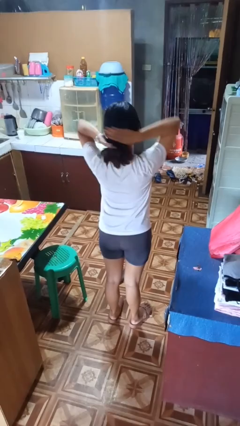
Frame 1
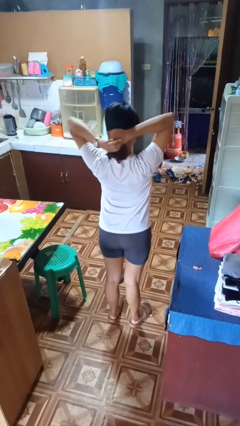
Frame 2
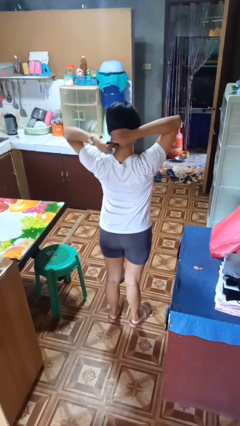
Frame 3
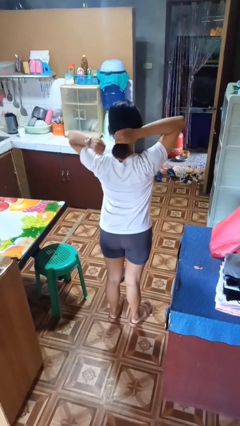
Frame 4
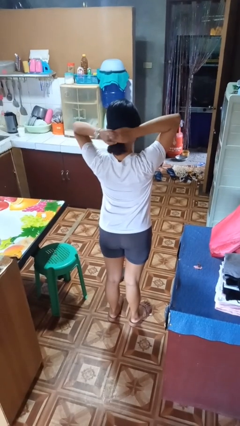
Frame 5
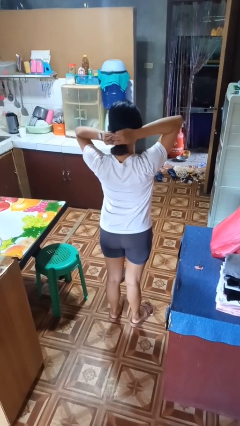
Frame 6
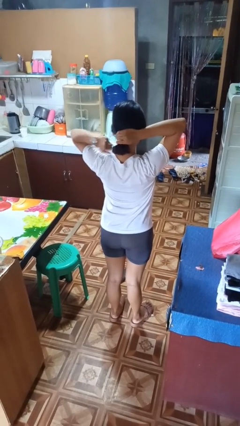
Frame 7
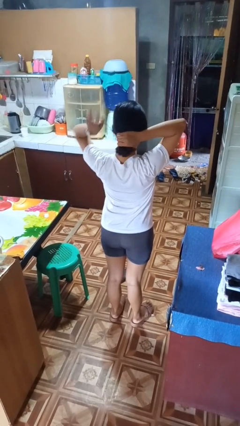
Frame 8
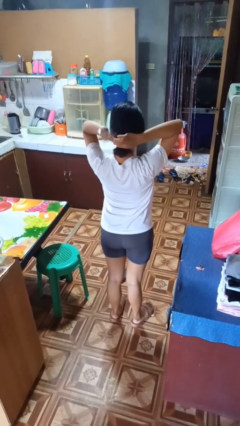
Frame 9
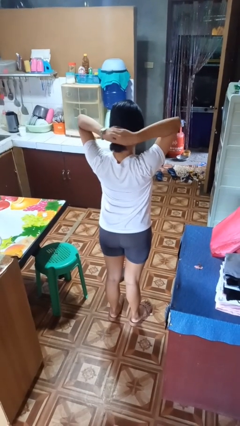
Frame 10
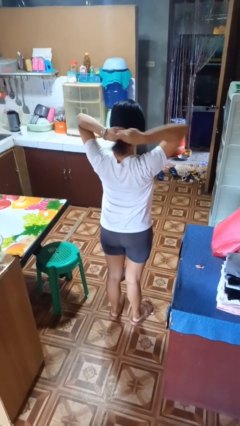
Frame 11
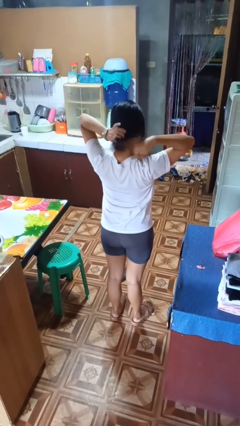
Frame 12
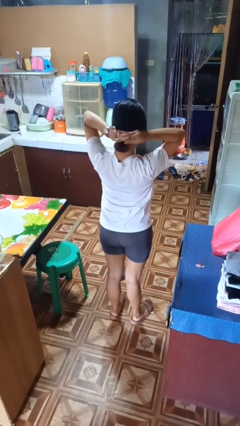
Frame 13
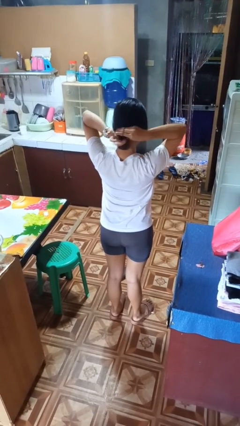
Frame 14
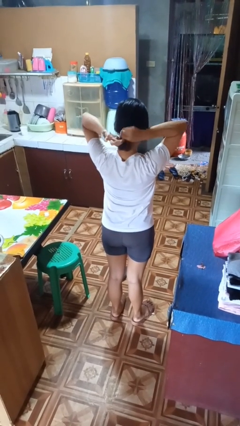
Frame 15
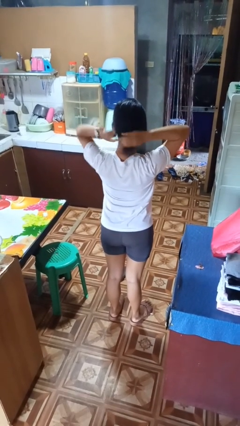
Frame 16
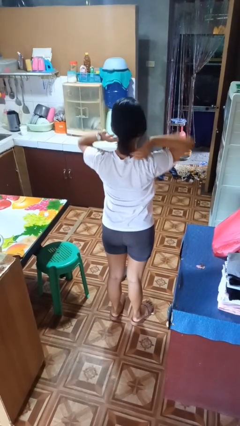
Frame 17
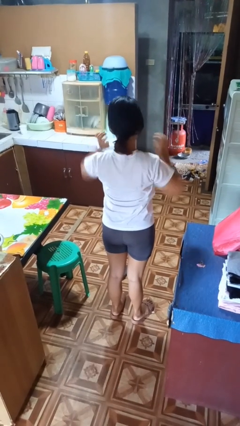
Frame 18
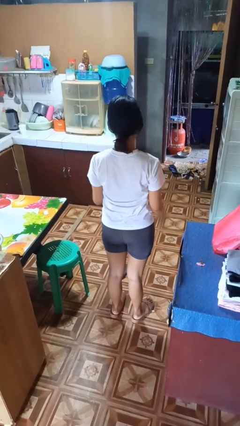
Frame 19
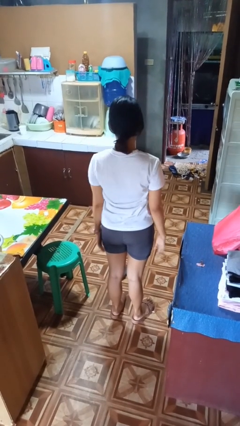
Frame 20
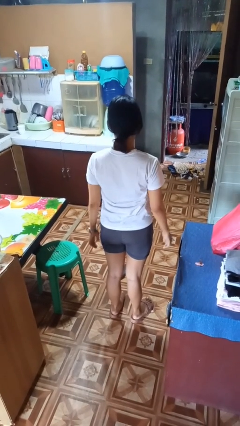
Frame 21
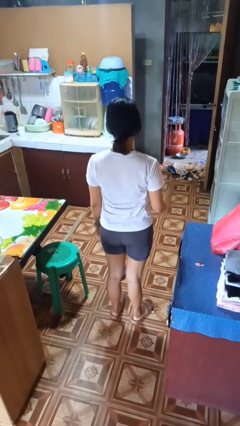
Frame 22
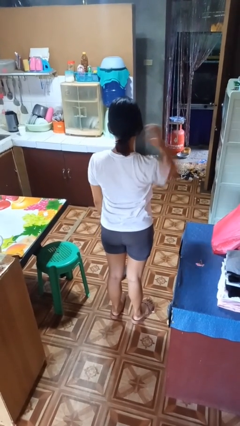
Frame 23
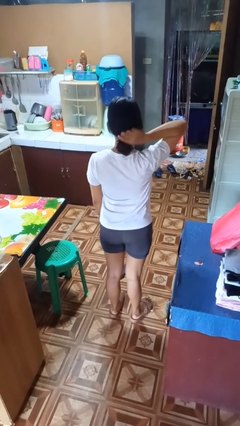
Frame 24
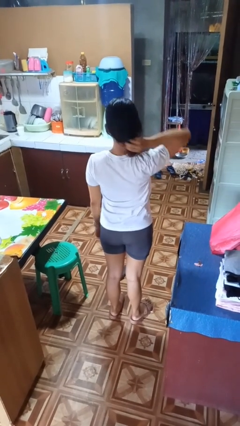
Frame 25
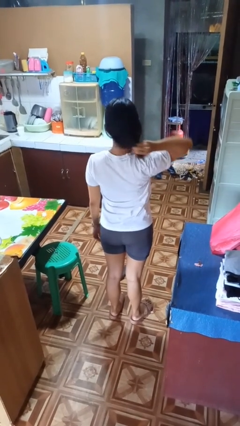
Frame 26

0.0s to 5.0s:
person puts hair in ponytail

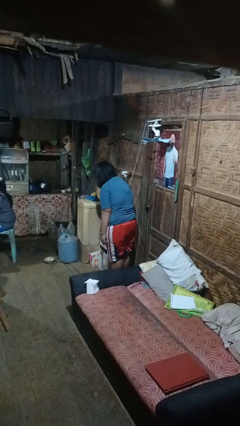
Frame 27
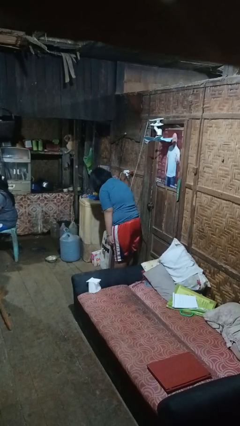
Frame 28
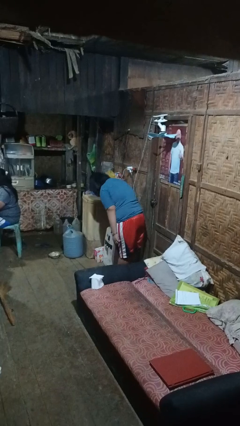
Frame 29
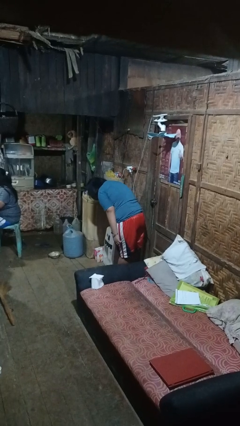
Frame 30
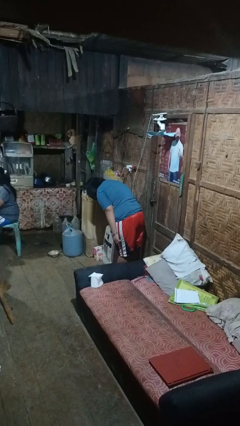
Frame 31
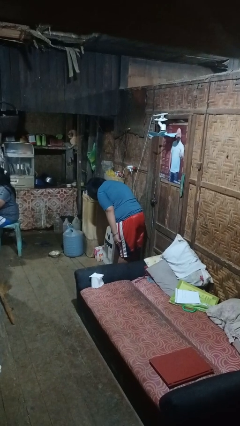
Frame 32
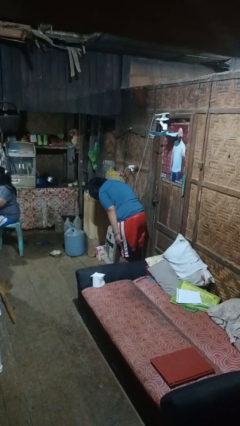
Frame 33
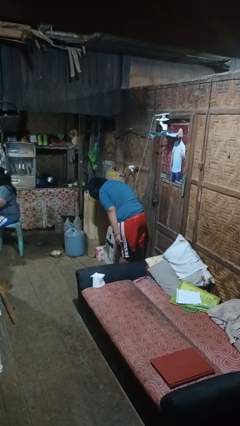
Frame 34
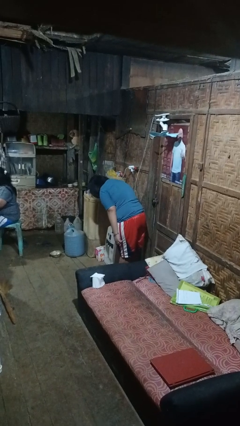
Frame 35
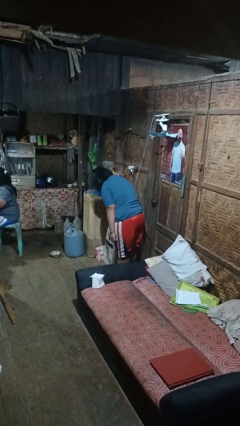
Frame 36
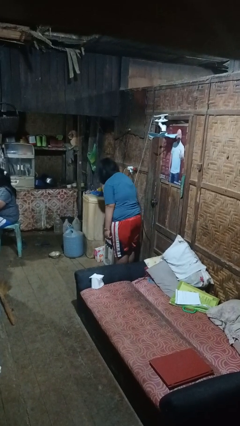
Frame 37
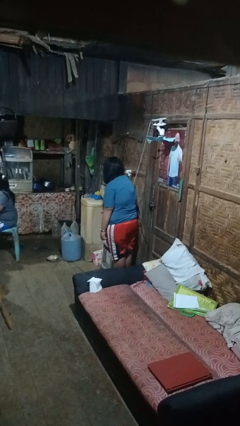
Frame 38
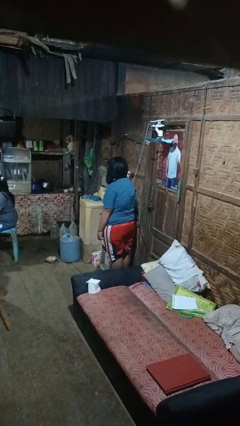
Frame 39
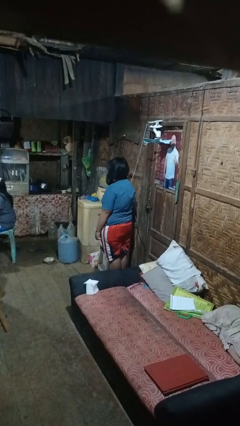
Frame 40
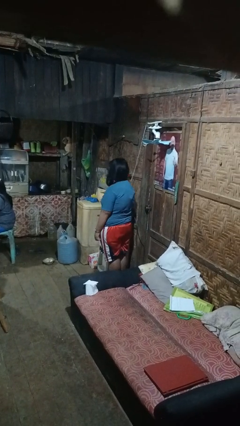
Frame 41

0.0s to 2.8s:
person bows

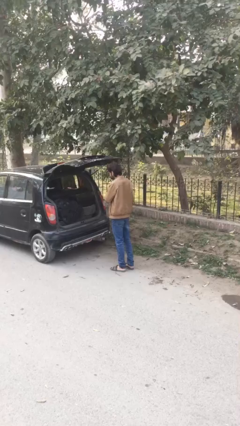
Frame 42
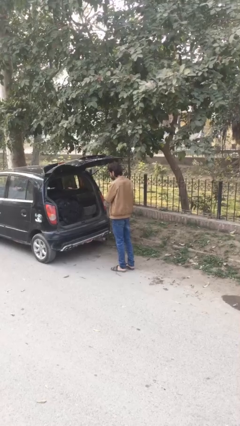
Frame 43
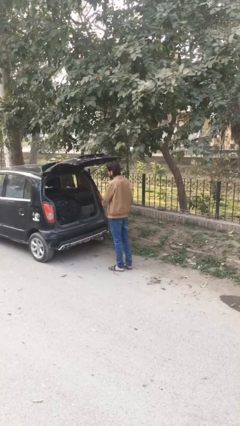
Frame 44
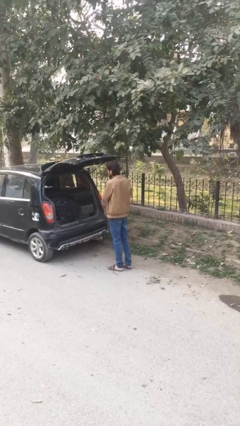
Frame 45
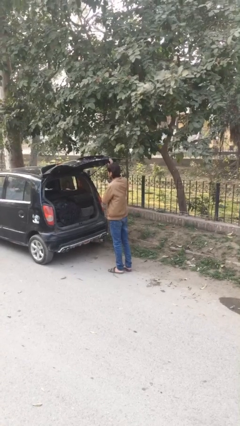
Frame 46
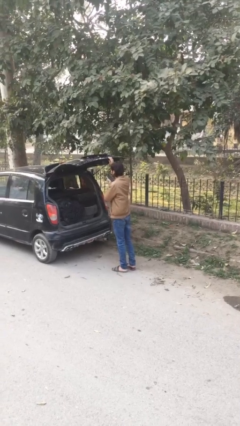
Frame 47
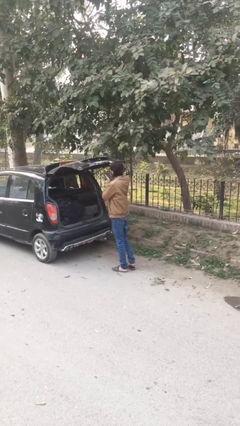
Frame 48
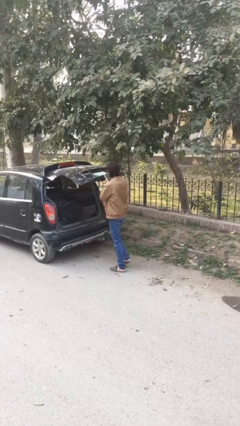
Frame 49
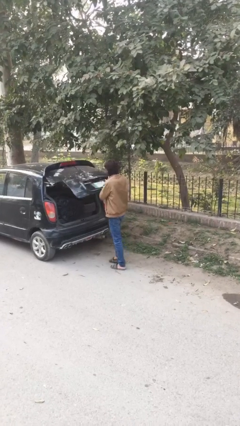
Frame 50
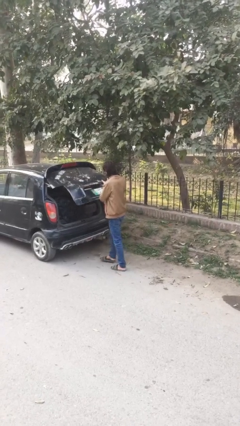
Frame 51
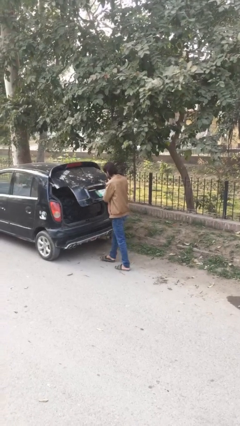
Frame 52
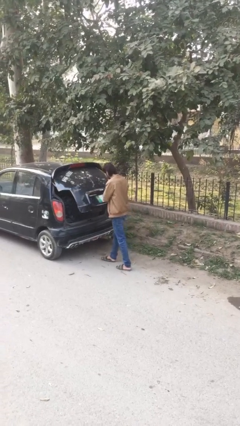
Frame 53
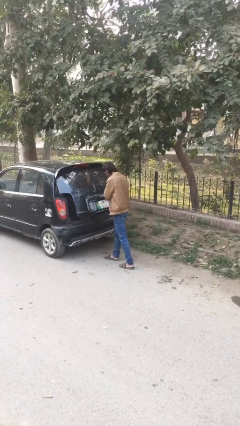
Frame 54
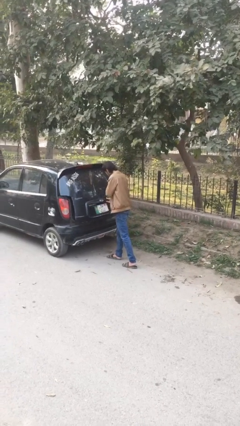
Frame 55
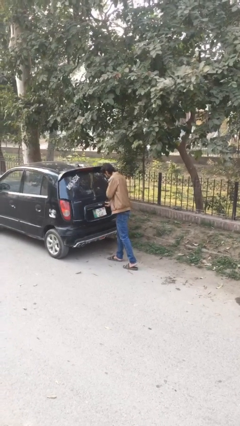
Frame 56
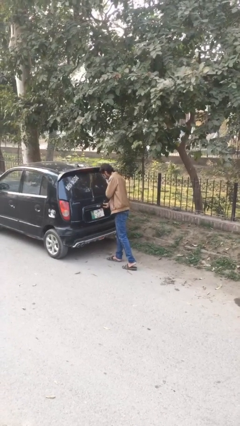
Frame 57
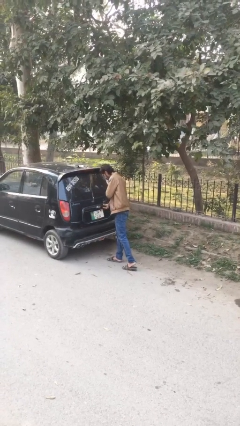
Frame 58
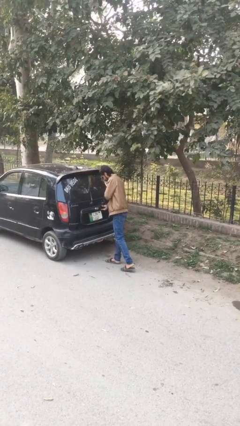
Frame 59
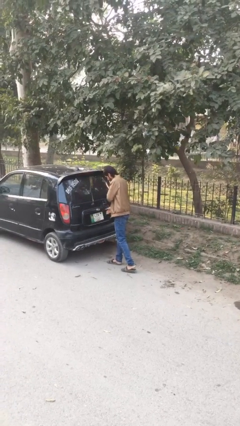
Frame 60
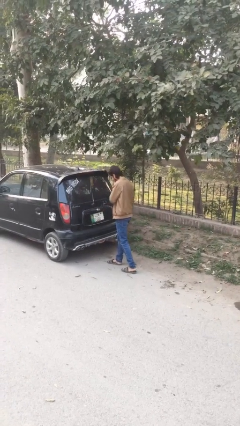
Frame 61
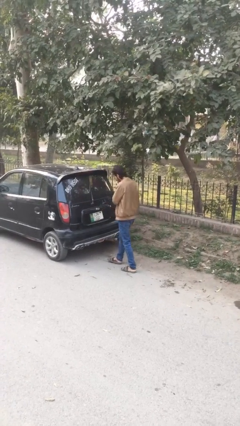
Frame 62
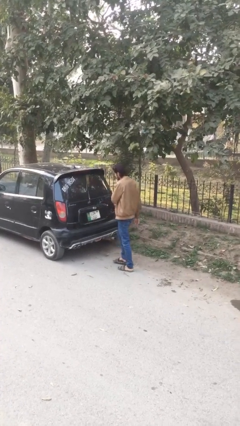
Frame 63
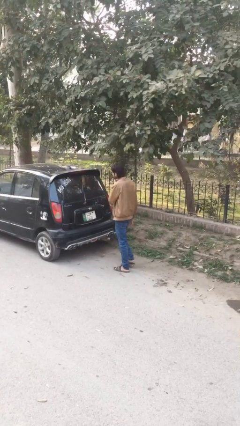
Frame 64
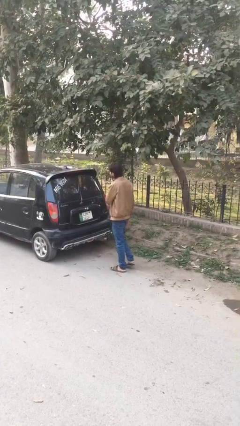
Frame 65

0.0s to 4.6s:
person closes car trunk

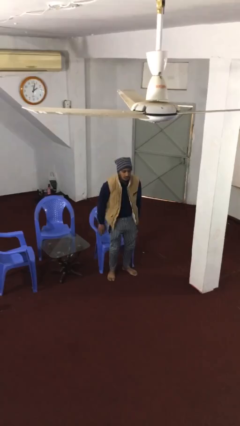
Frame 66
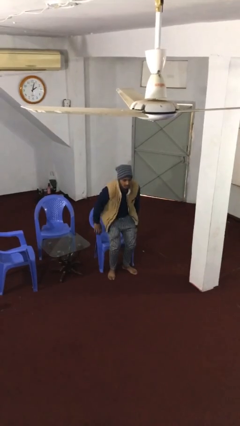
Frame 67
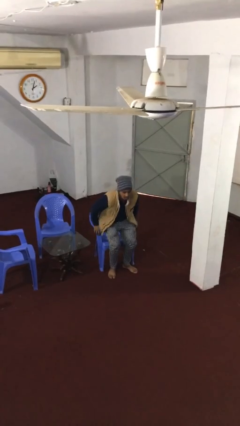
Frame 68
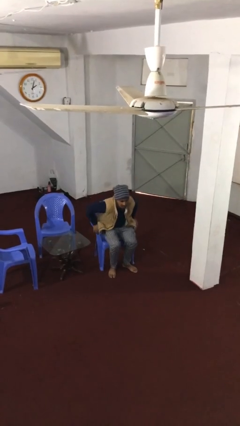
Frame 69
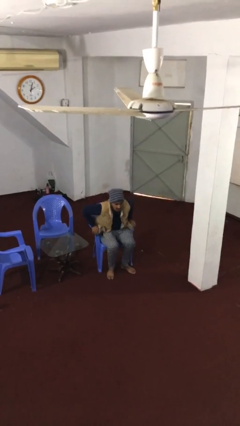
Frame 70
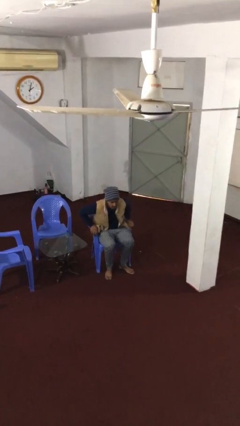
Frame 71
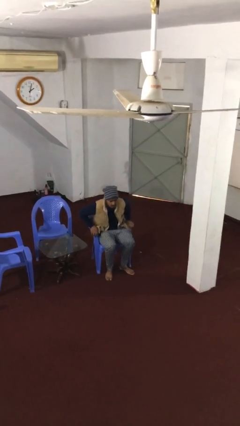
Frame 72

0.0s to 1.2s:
person sits down

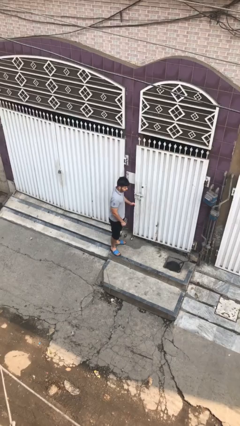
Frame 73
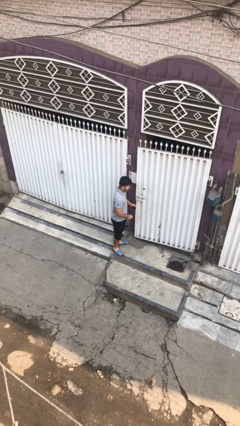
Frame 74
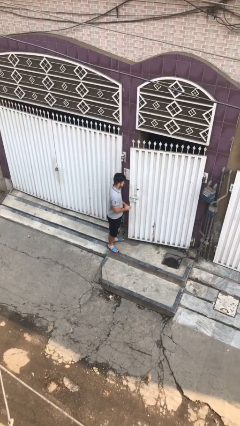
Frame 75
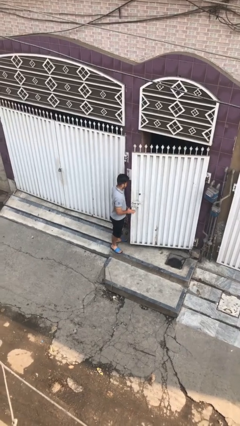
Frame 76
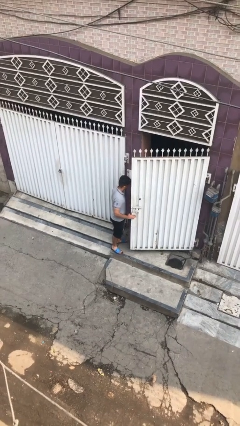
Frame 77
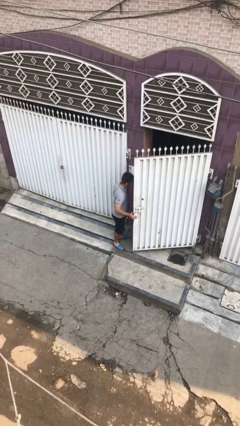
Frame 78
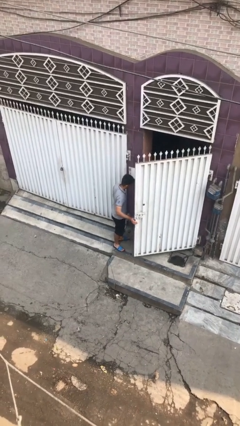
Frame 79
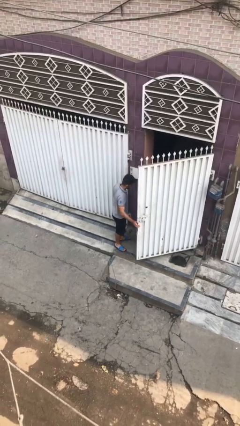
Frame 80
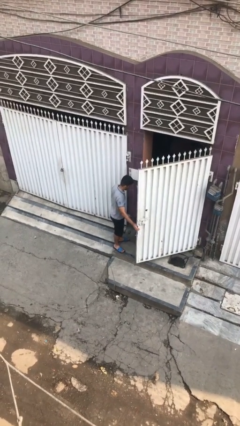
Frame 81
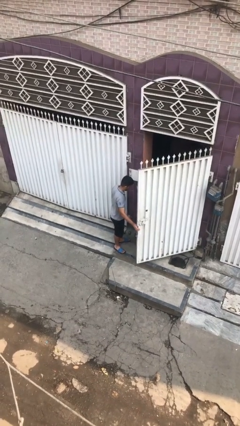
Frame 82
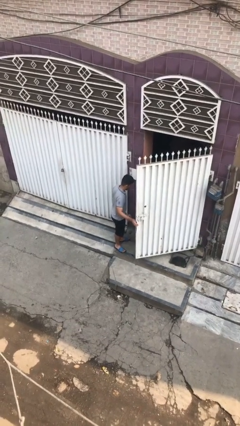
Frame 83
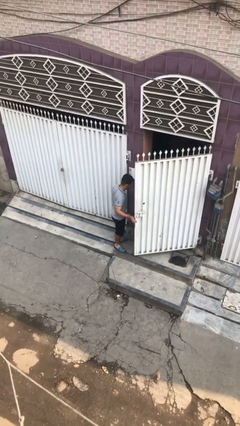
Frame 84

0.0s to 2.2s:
person opens facility door

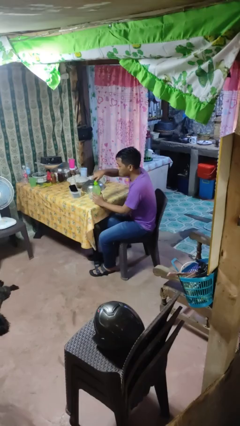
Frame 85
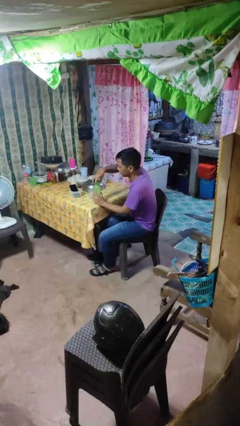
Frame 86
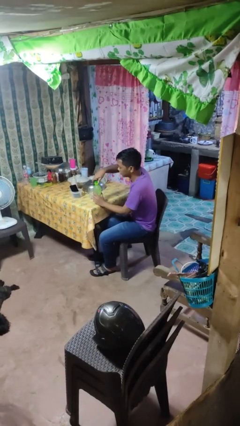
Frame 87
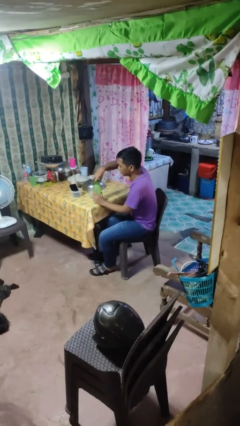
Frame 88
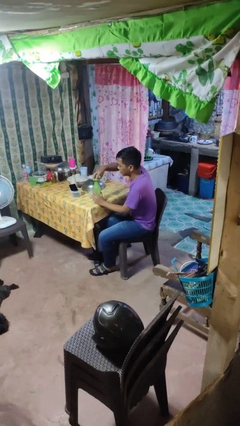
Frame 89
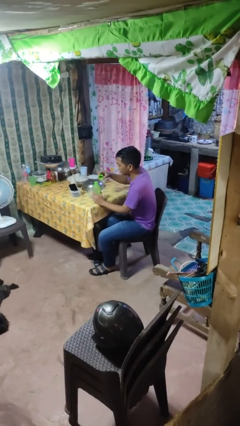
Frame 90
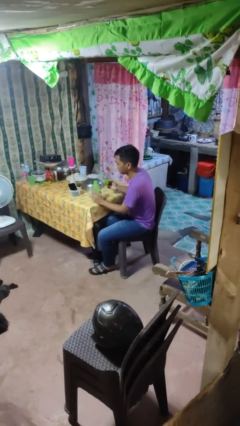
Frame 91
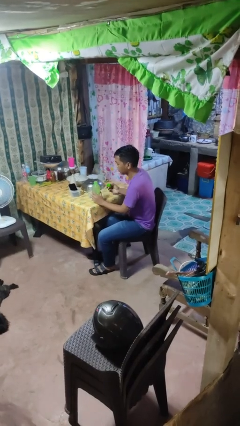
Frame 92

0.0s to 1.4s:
person unscrews lid from bottle

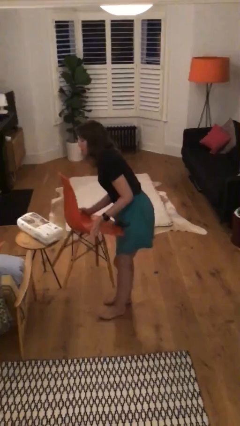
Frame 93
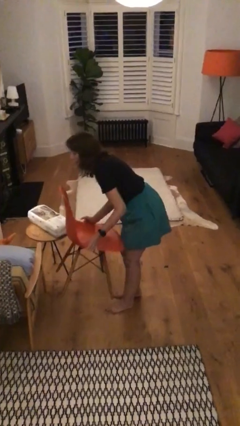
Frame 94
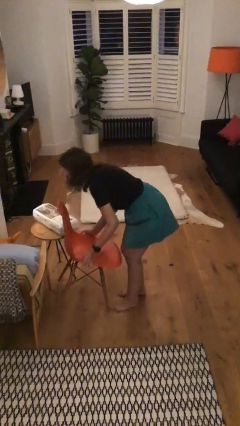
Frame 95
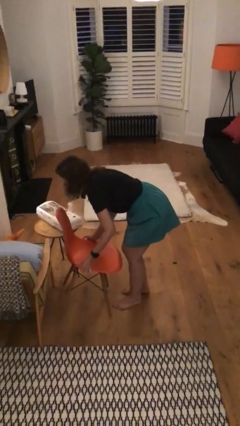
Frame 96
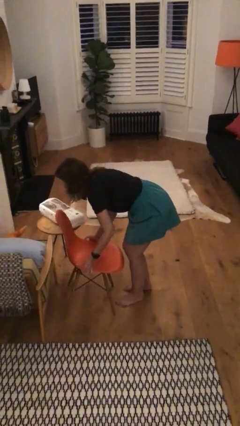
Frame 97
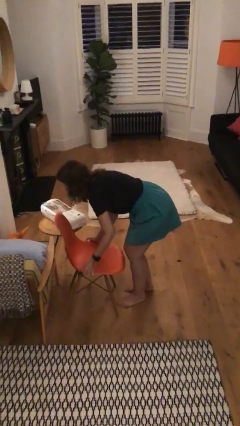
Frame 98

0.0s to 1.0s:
person puts down object on floor
